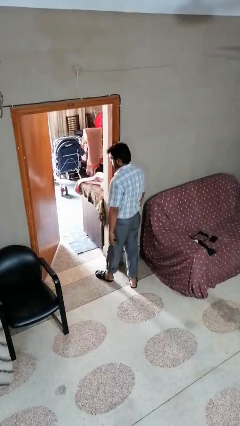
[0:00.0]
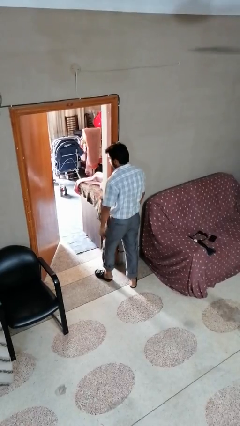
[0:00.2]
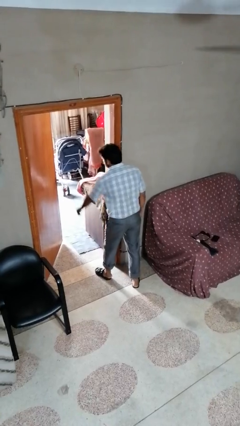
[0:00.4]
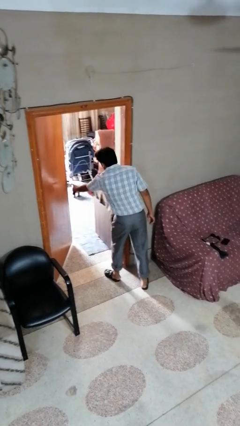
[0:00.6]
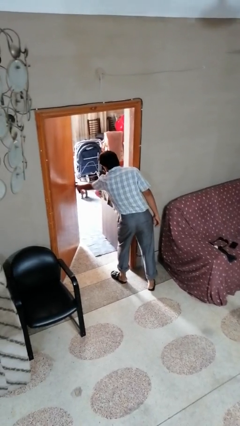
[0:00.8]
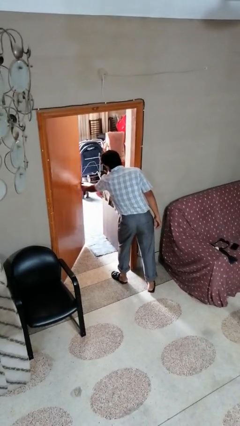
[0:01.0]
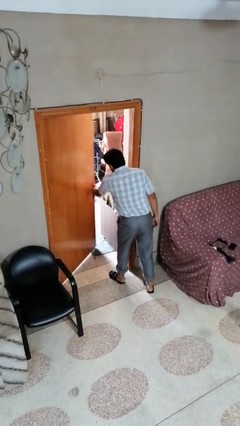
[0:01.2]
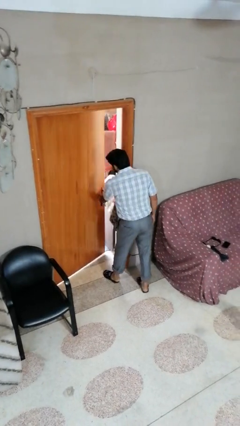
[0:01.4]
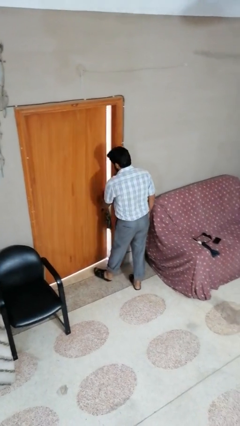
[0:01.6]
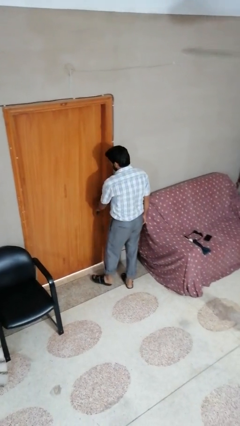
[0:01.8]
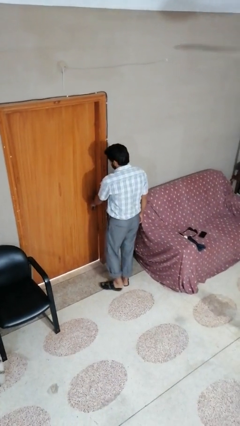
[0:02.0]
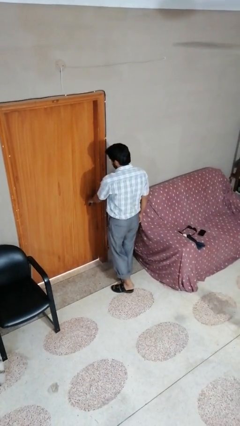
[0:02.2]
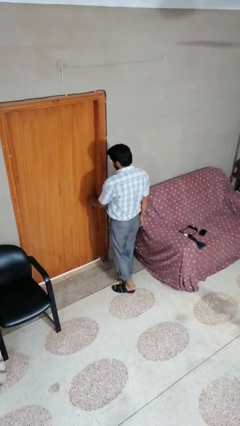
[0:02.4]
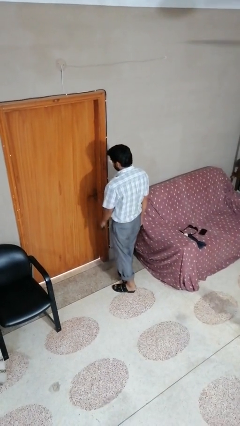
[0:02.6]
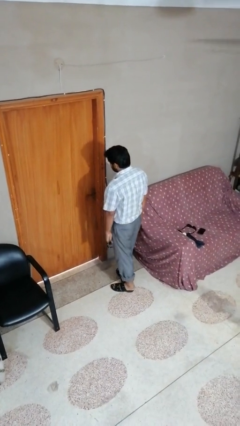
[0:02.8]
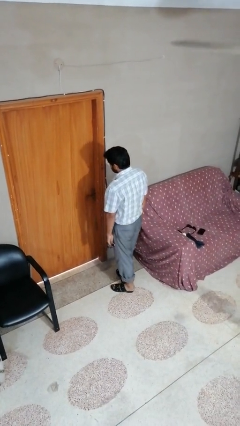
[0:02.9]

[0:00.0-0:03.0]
person closes facility door

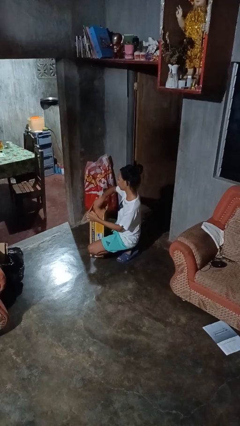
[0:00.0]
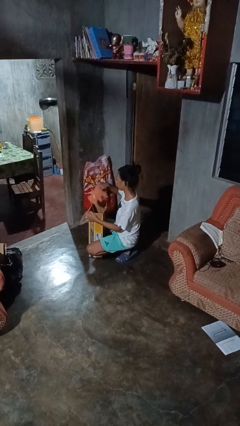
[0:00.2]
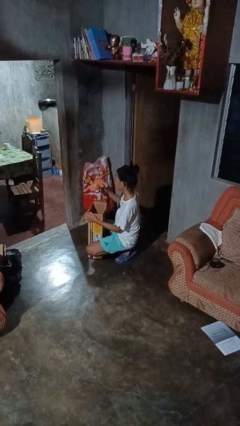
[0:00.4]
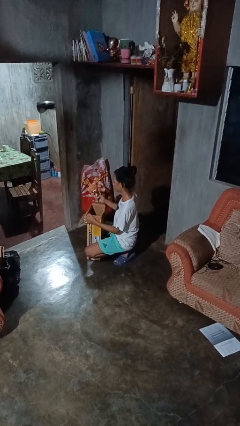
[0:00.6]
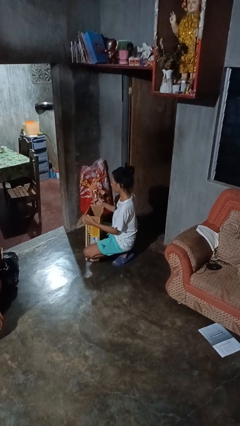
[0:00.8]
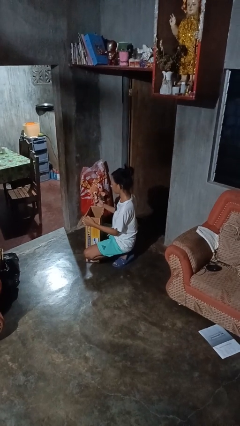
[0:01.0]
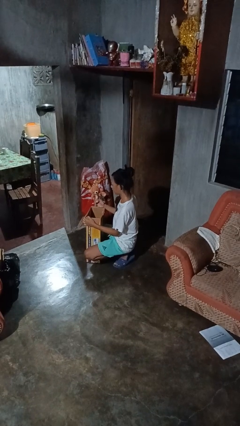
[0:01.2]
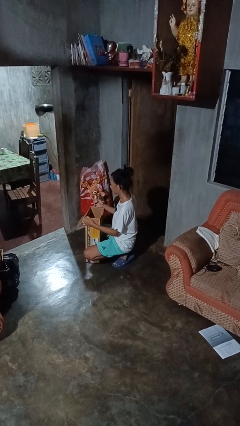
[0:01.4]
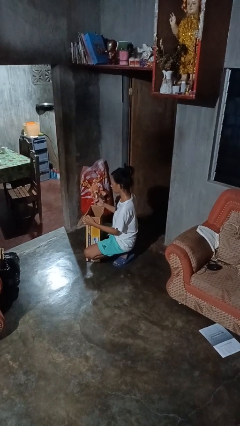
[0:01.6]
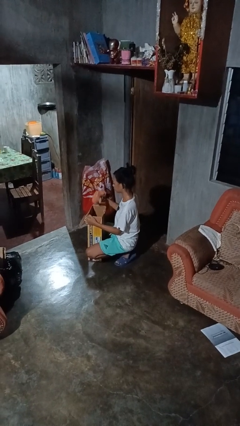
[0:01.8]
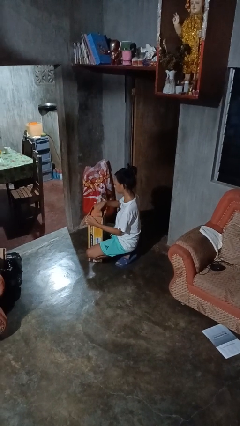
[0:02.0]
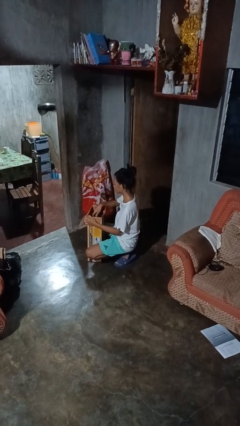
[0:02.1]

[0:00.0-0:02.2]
person takes object from box

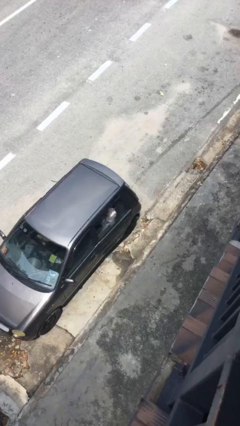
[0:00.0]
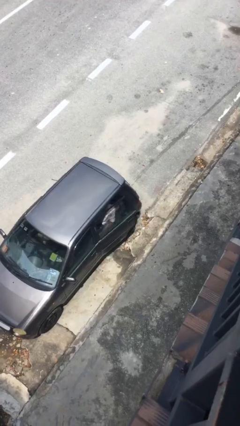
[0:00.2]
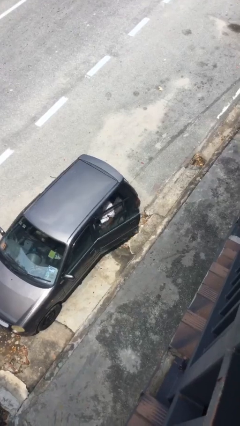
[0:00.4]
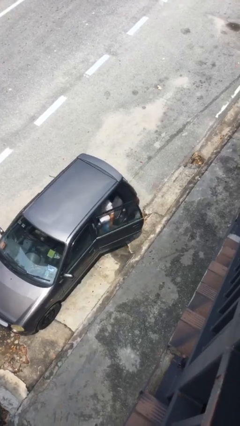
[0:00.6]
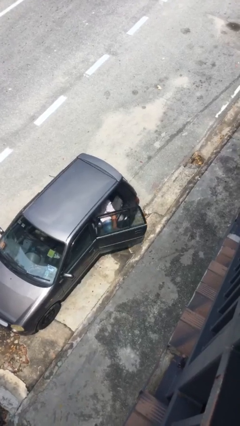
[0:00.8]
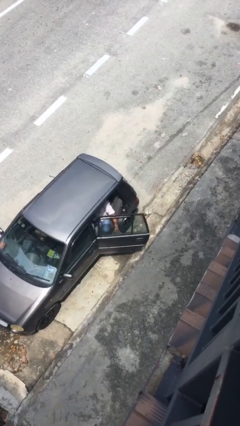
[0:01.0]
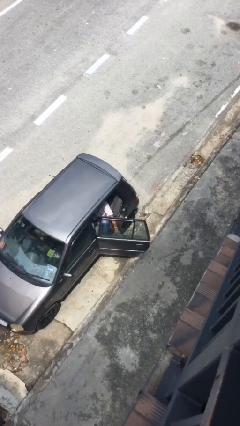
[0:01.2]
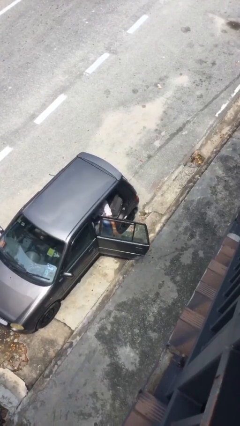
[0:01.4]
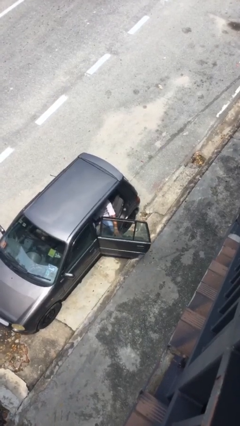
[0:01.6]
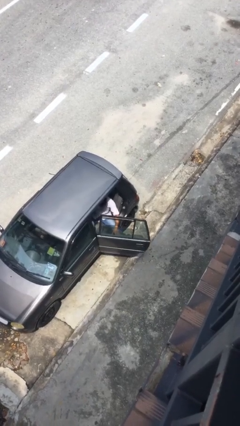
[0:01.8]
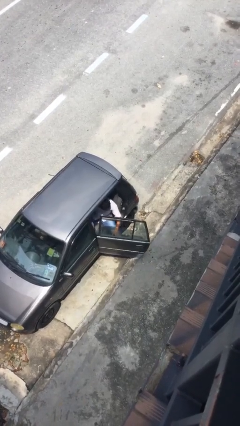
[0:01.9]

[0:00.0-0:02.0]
person opens car door

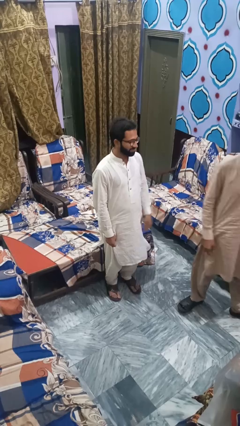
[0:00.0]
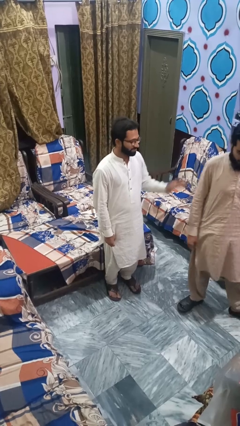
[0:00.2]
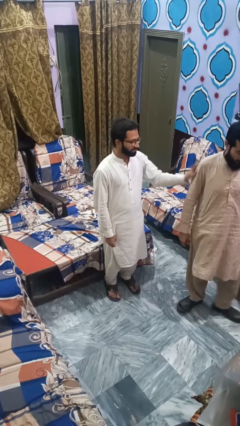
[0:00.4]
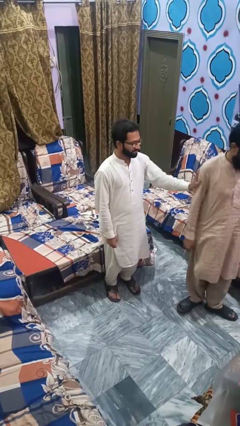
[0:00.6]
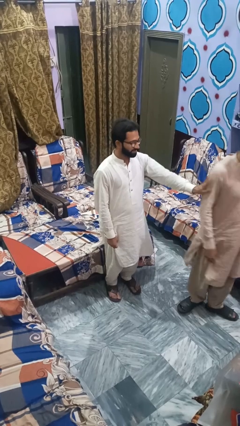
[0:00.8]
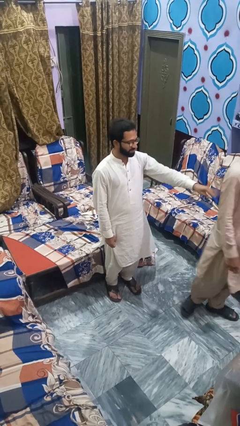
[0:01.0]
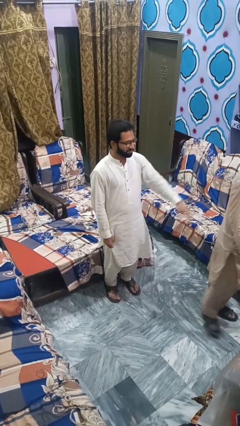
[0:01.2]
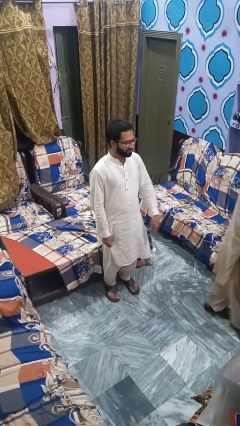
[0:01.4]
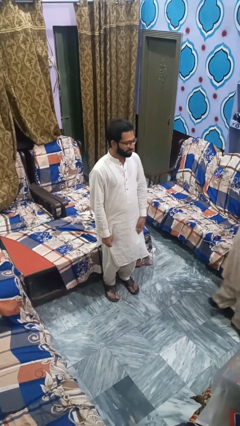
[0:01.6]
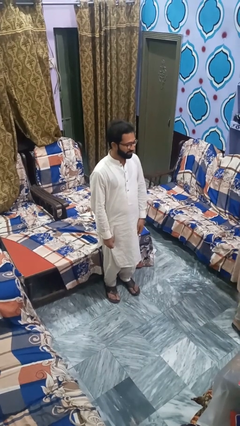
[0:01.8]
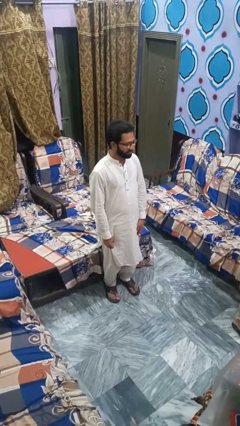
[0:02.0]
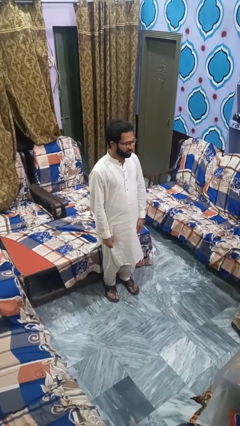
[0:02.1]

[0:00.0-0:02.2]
person shoves person

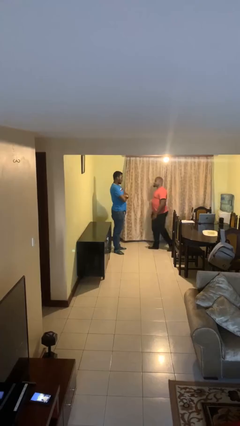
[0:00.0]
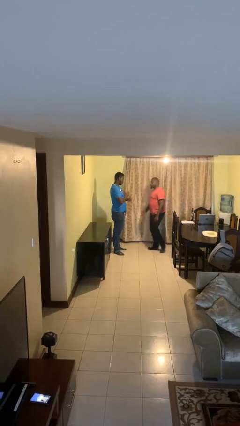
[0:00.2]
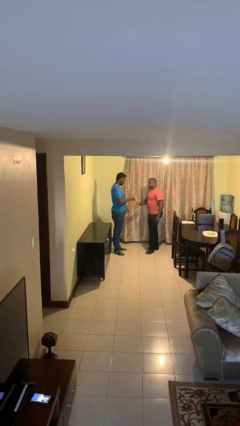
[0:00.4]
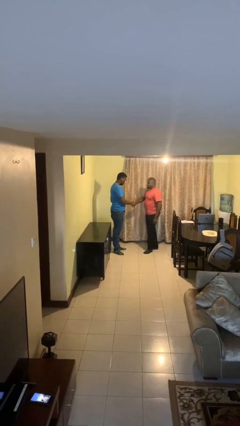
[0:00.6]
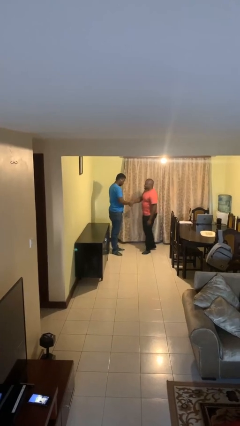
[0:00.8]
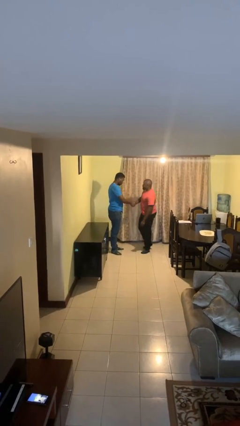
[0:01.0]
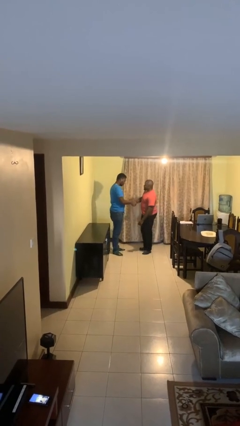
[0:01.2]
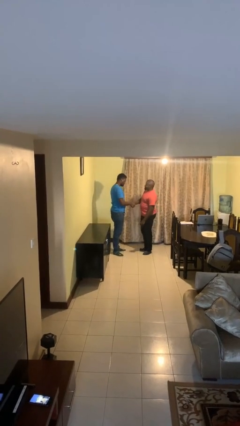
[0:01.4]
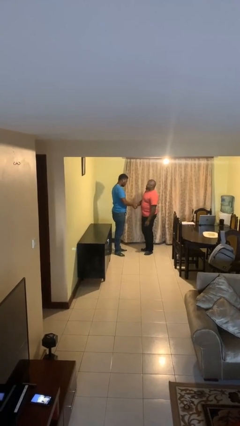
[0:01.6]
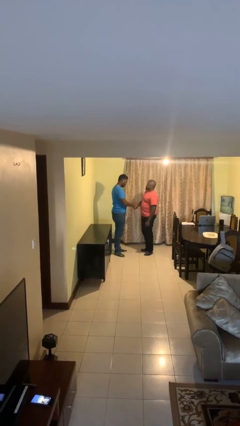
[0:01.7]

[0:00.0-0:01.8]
person shakes hand

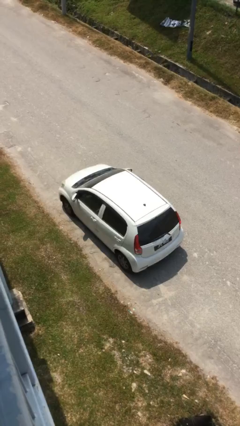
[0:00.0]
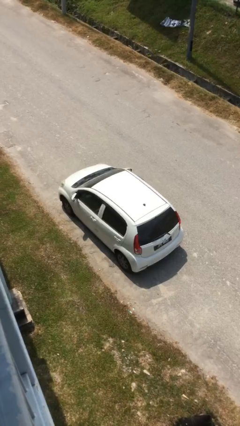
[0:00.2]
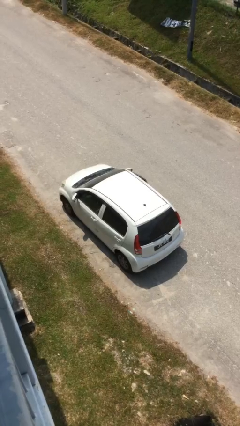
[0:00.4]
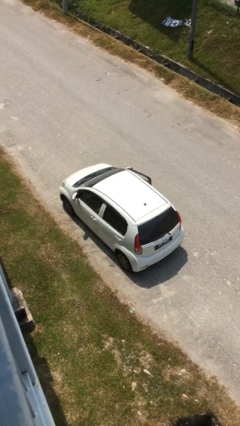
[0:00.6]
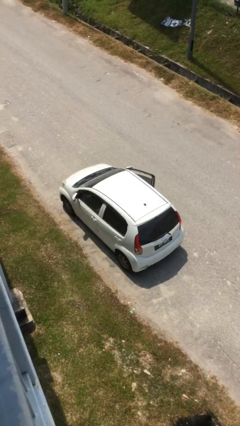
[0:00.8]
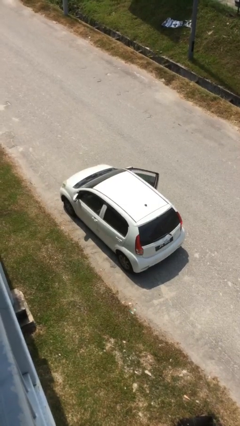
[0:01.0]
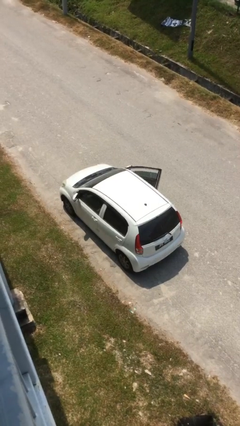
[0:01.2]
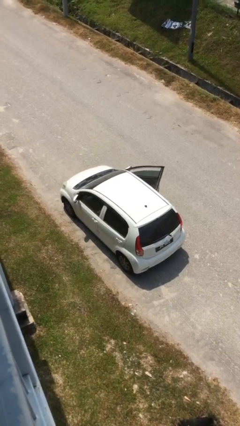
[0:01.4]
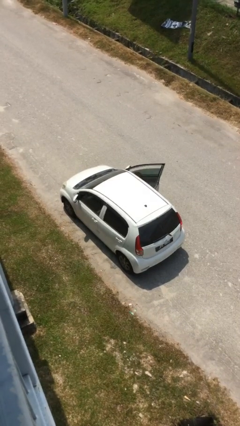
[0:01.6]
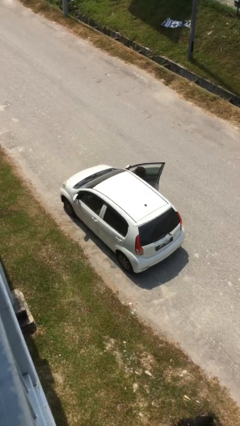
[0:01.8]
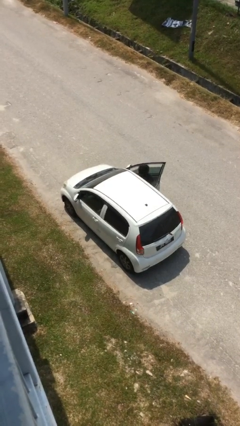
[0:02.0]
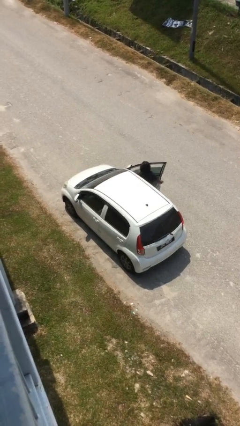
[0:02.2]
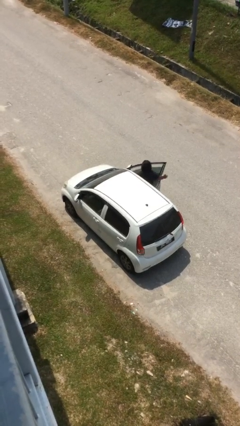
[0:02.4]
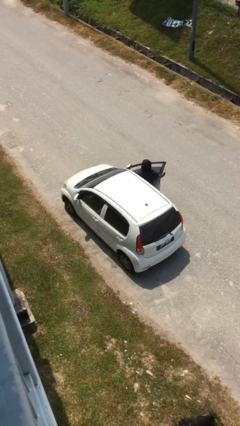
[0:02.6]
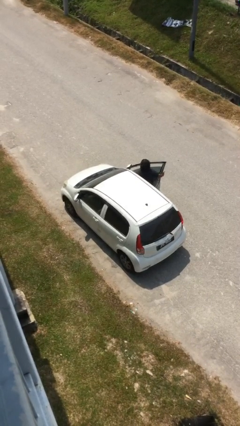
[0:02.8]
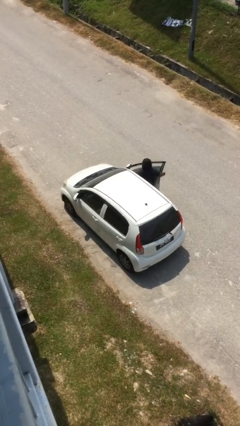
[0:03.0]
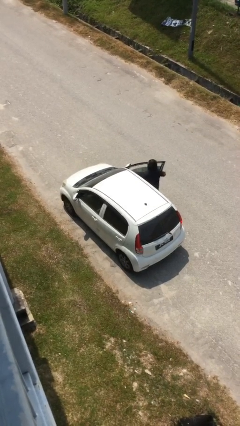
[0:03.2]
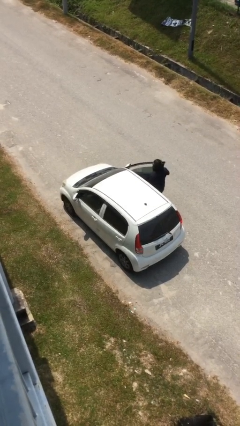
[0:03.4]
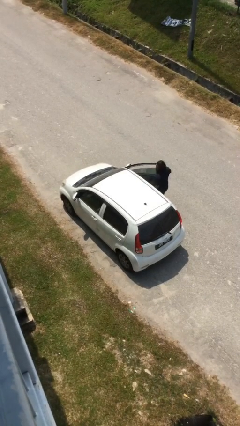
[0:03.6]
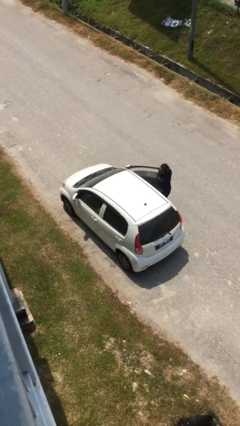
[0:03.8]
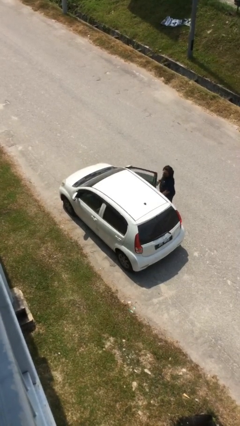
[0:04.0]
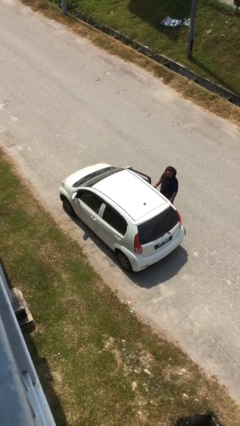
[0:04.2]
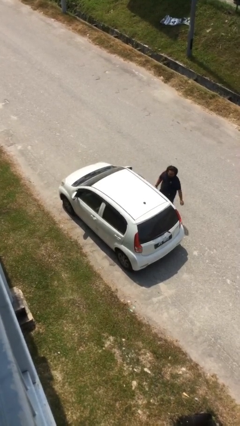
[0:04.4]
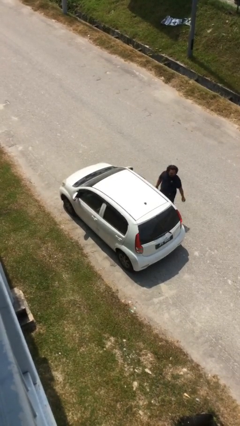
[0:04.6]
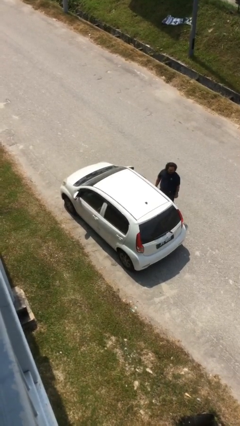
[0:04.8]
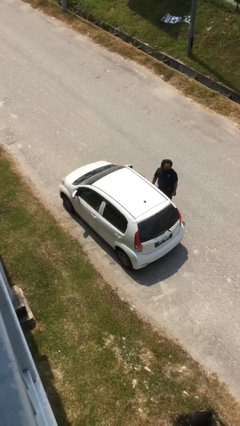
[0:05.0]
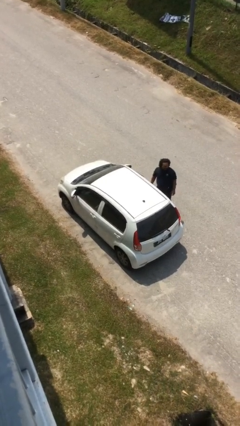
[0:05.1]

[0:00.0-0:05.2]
car drops off person

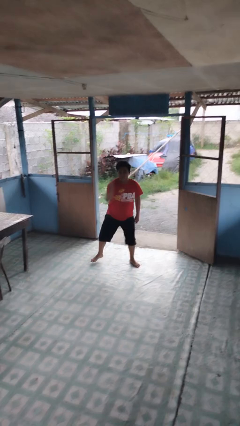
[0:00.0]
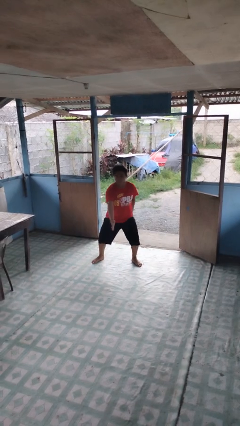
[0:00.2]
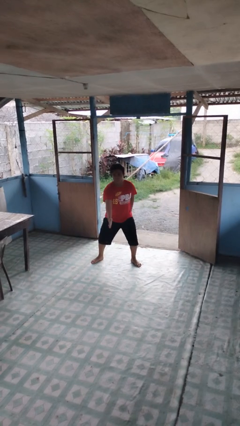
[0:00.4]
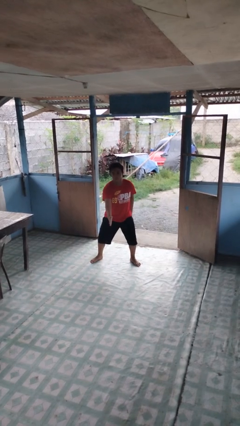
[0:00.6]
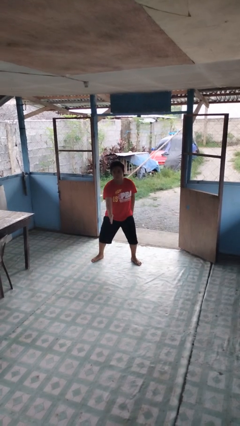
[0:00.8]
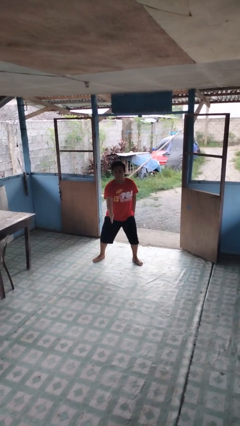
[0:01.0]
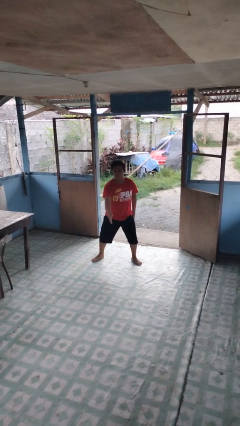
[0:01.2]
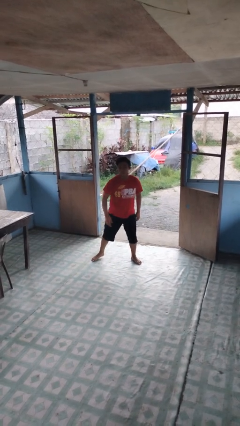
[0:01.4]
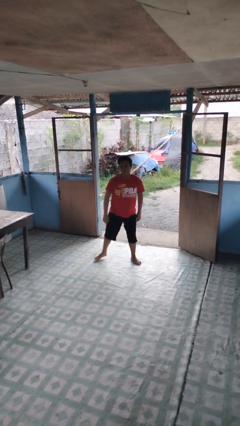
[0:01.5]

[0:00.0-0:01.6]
person karate chop
